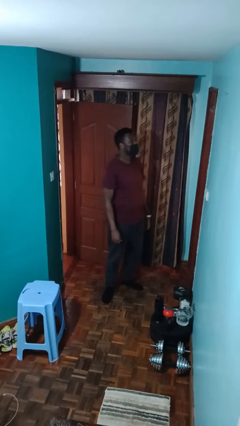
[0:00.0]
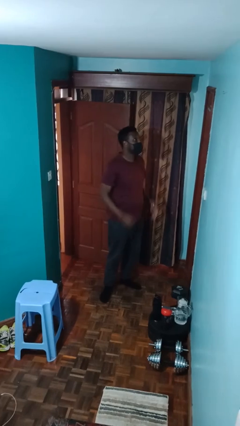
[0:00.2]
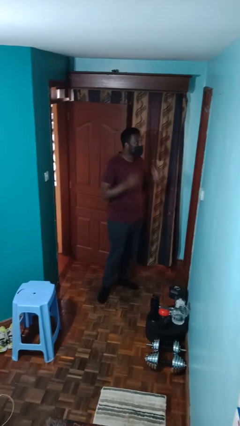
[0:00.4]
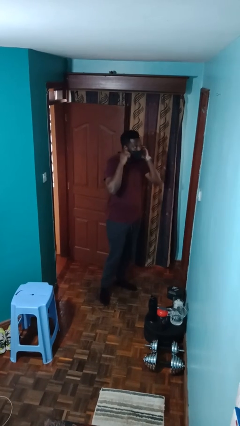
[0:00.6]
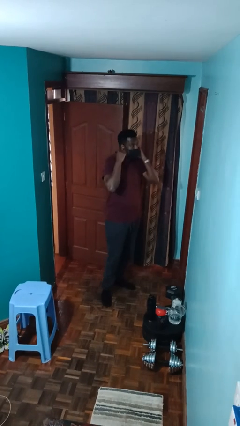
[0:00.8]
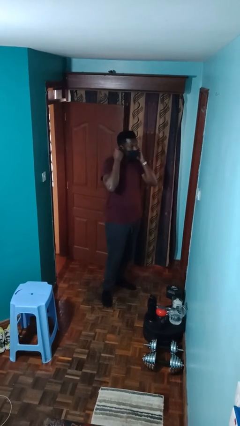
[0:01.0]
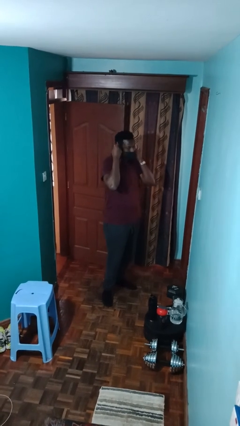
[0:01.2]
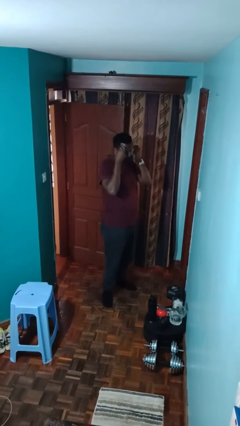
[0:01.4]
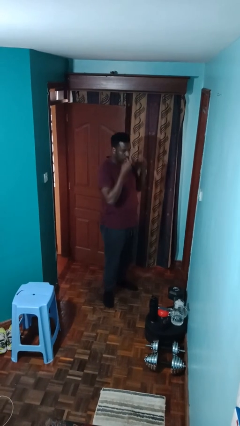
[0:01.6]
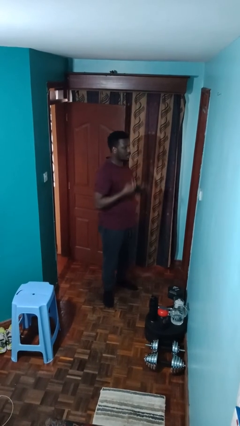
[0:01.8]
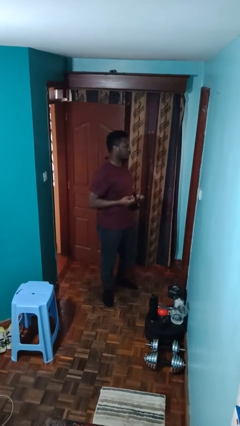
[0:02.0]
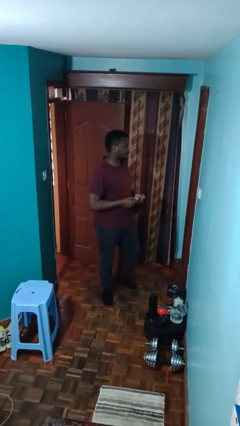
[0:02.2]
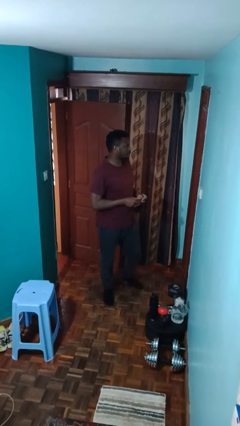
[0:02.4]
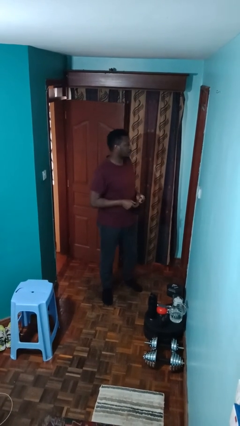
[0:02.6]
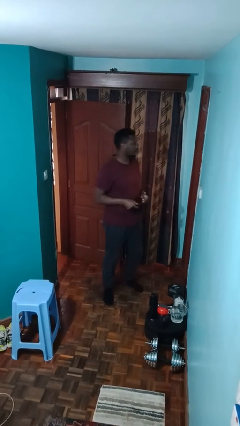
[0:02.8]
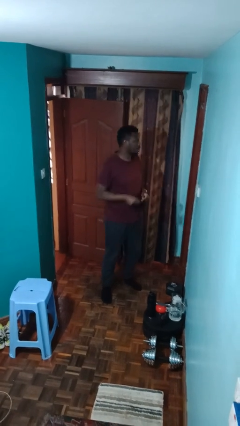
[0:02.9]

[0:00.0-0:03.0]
person takes off facemask

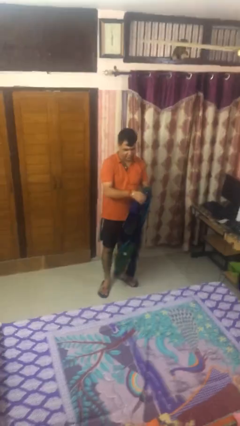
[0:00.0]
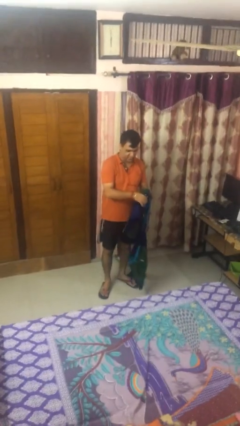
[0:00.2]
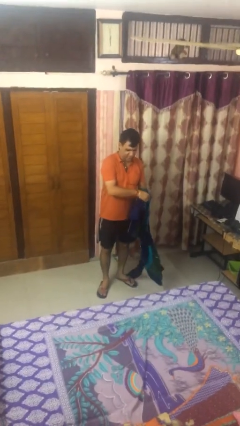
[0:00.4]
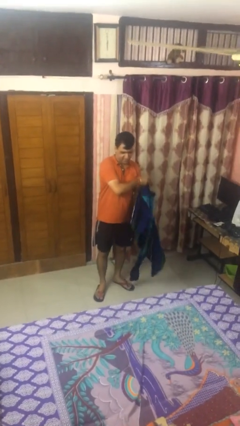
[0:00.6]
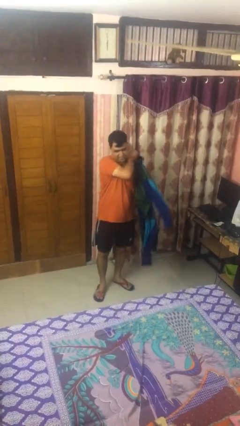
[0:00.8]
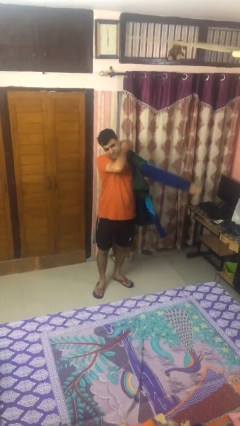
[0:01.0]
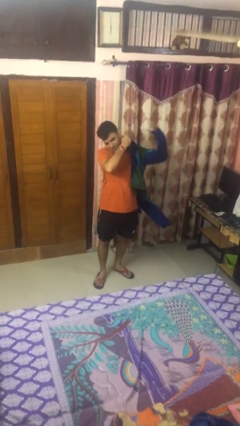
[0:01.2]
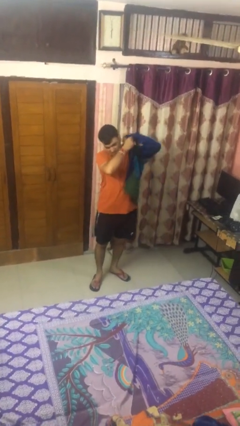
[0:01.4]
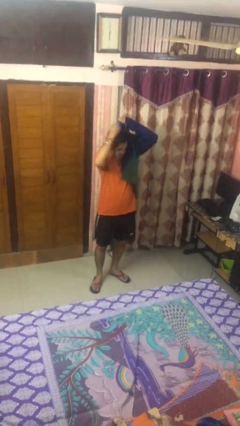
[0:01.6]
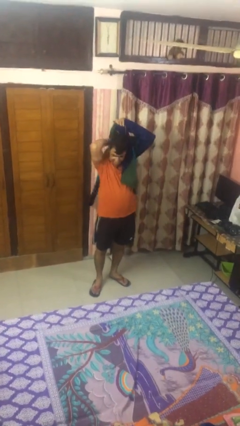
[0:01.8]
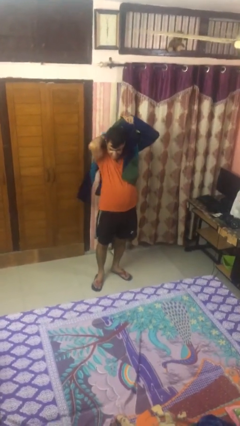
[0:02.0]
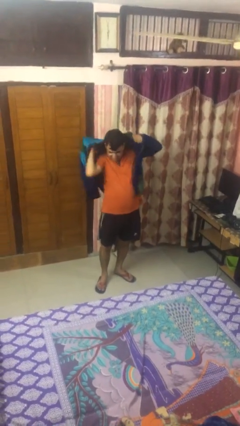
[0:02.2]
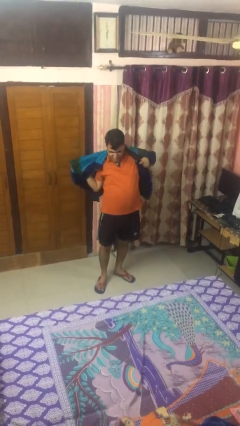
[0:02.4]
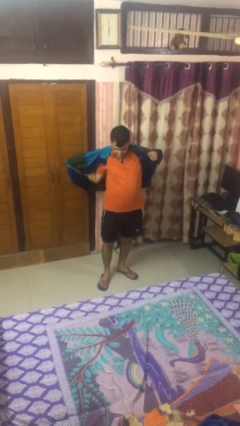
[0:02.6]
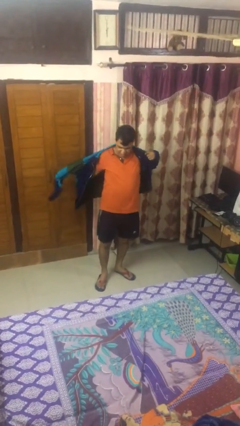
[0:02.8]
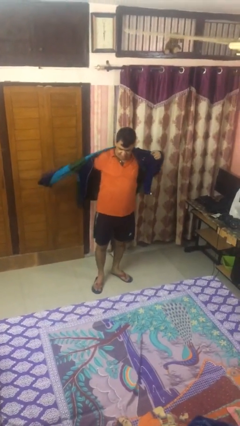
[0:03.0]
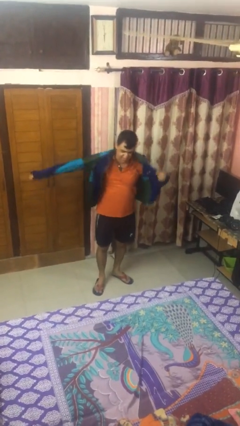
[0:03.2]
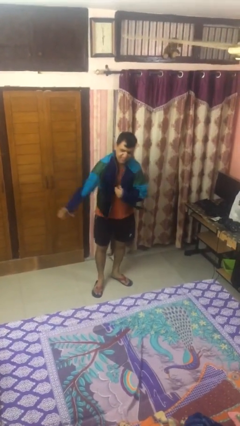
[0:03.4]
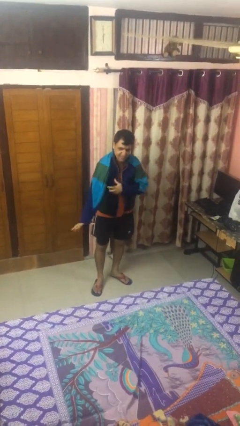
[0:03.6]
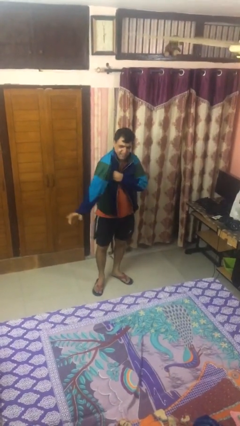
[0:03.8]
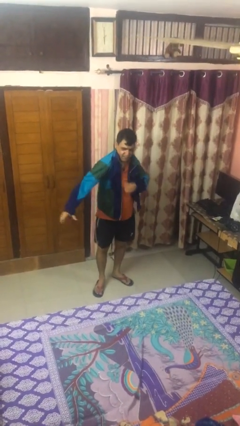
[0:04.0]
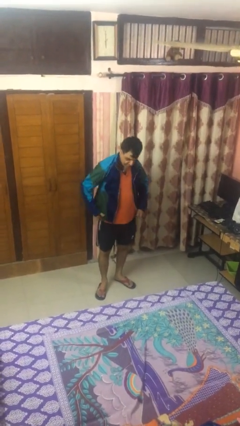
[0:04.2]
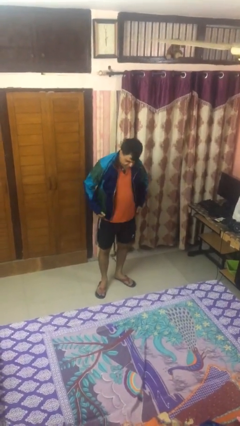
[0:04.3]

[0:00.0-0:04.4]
person puts on jacket

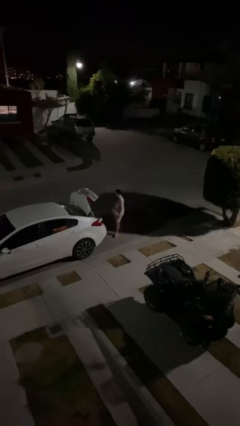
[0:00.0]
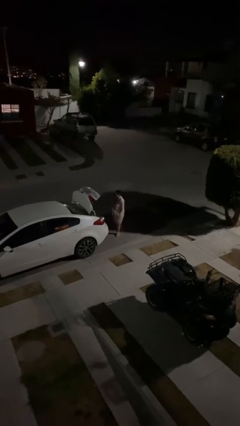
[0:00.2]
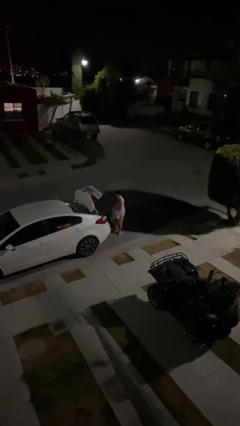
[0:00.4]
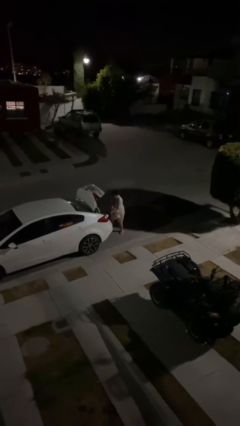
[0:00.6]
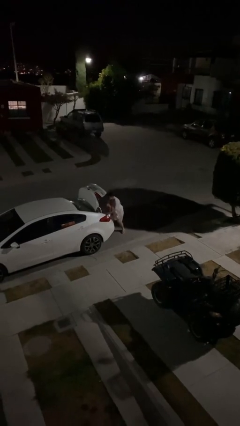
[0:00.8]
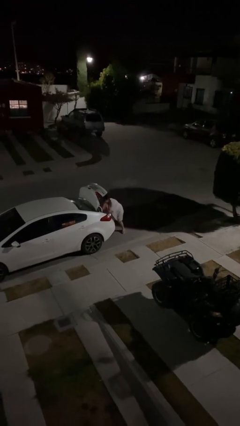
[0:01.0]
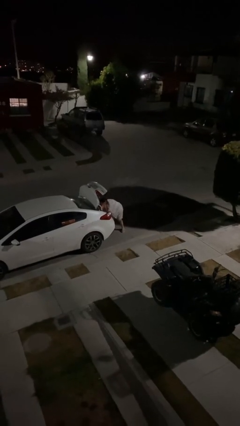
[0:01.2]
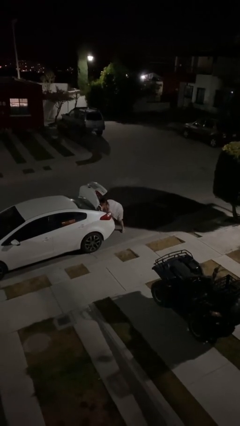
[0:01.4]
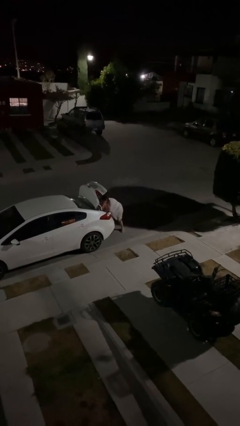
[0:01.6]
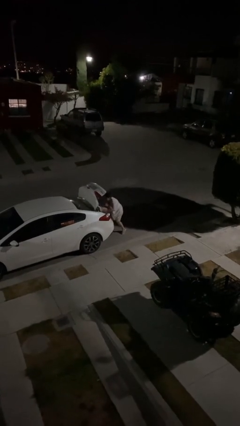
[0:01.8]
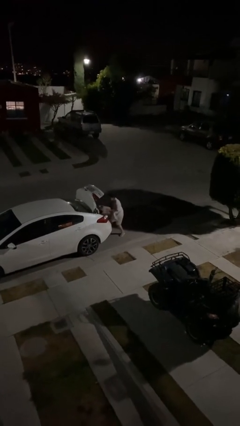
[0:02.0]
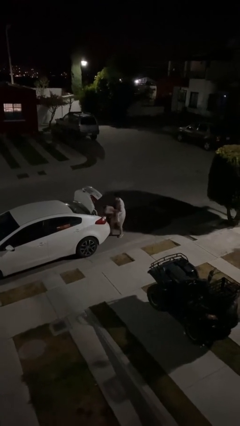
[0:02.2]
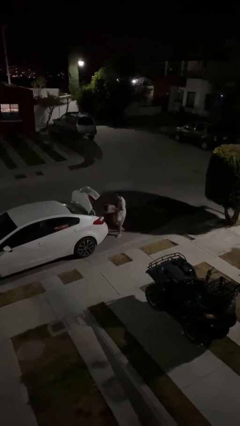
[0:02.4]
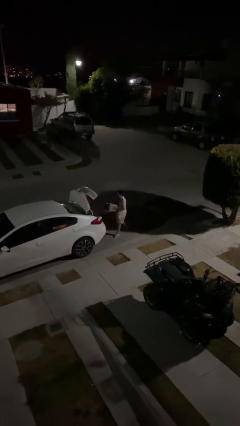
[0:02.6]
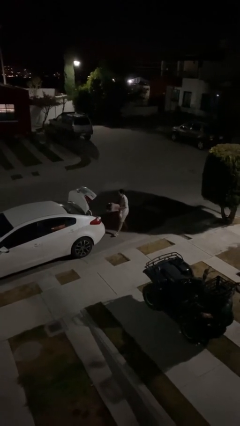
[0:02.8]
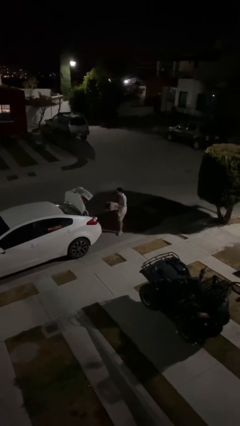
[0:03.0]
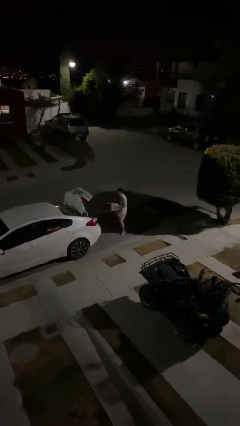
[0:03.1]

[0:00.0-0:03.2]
person unloads car

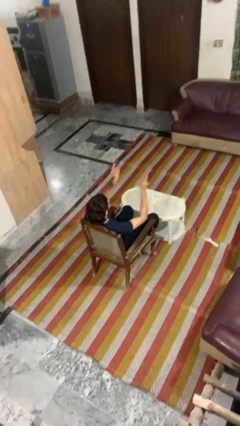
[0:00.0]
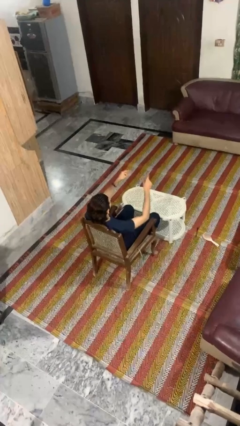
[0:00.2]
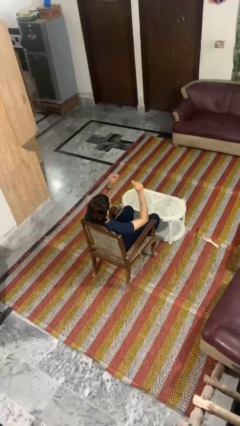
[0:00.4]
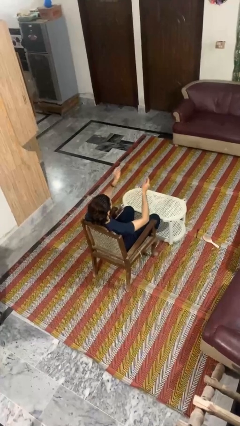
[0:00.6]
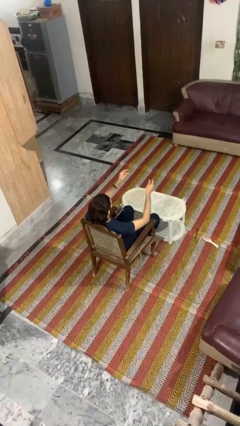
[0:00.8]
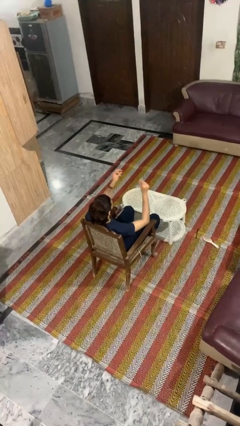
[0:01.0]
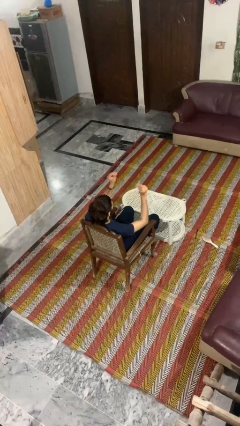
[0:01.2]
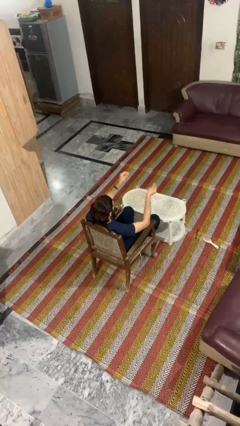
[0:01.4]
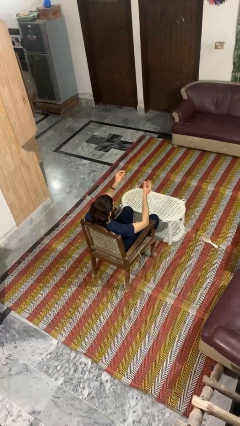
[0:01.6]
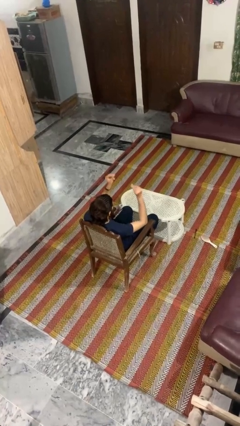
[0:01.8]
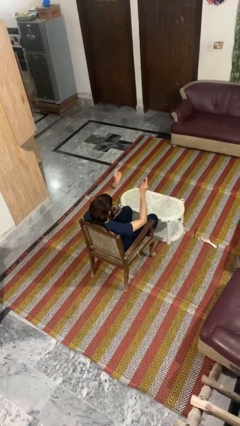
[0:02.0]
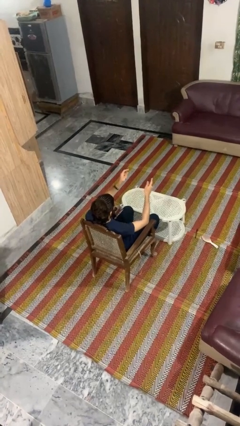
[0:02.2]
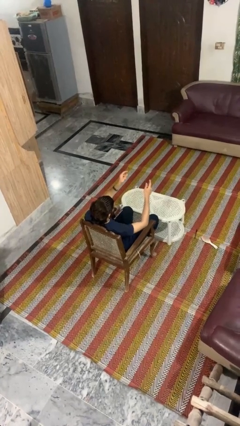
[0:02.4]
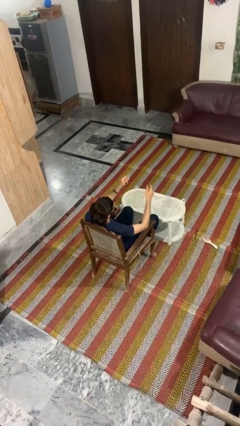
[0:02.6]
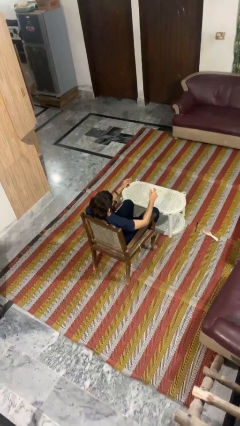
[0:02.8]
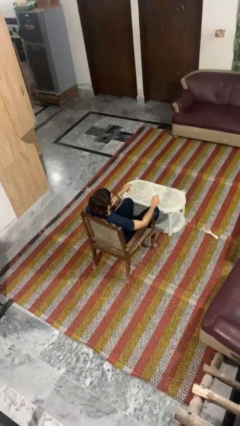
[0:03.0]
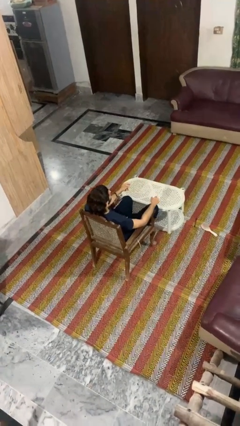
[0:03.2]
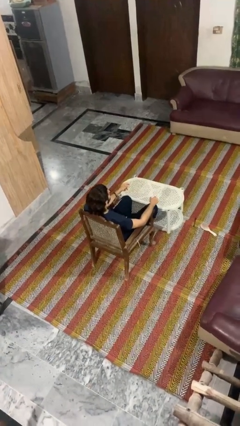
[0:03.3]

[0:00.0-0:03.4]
person snaps fingers

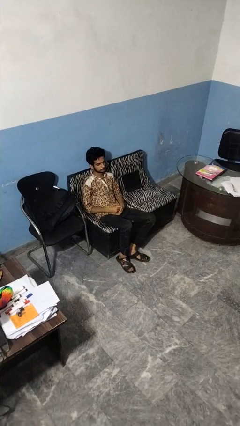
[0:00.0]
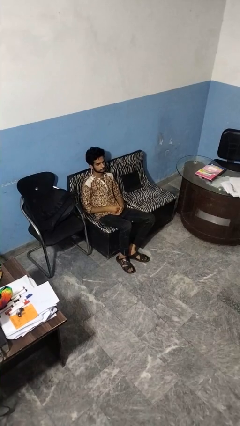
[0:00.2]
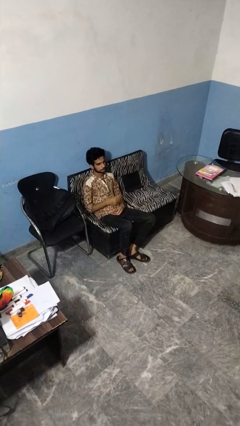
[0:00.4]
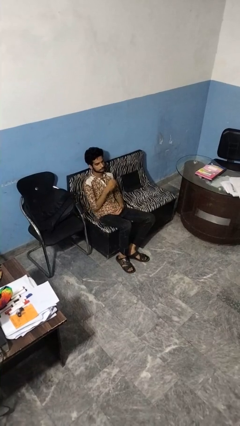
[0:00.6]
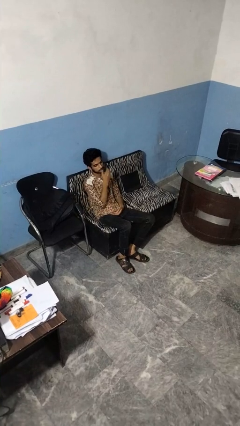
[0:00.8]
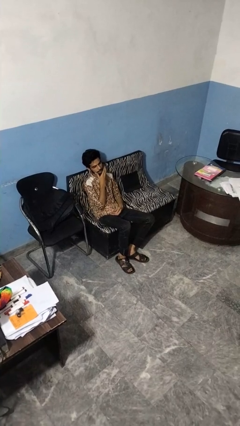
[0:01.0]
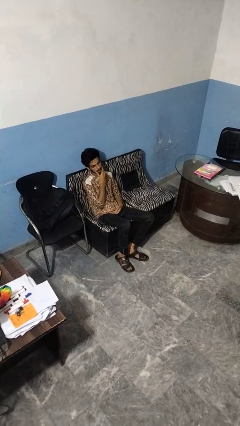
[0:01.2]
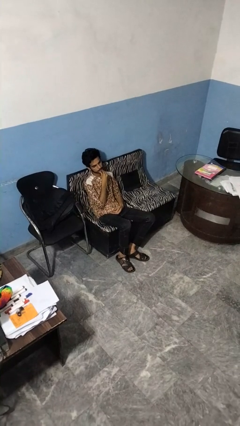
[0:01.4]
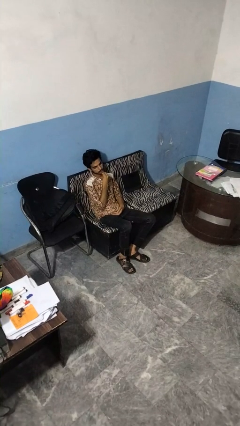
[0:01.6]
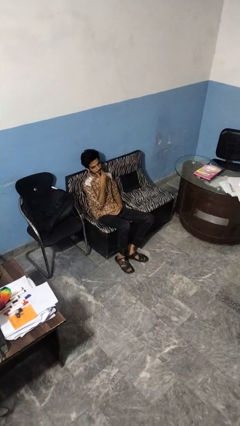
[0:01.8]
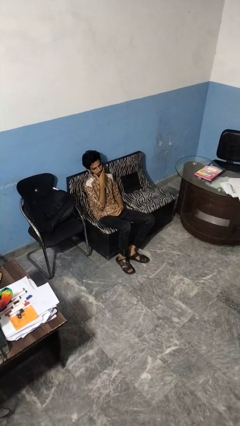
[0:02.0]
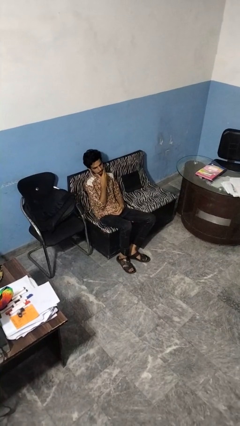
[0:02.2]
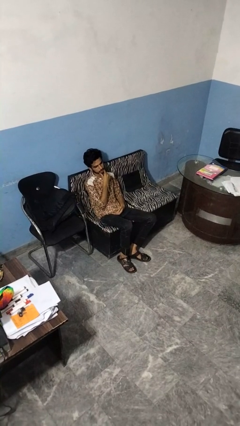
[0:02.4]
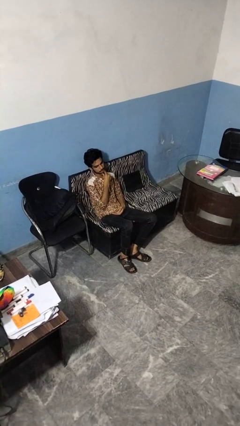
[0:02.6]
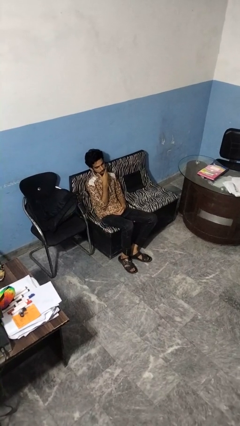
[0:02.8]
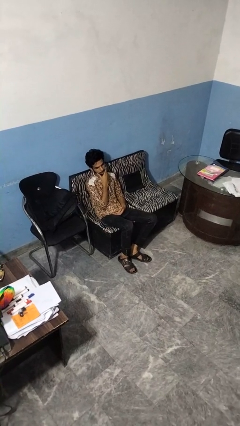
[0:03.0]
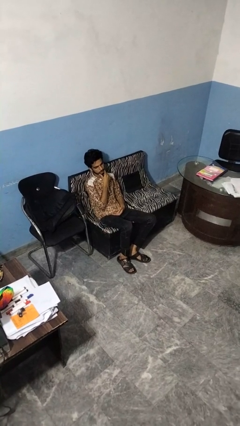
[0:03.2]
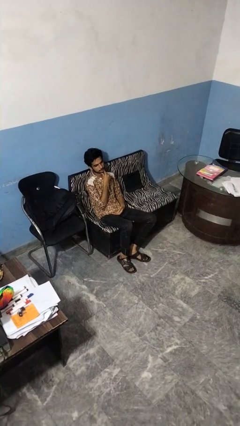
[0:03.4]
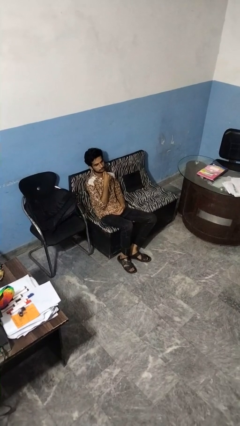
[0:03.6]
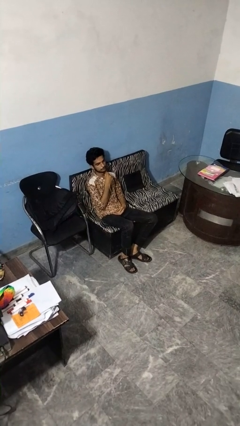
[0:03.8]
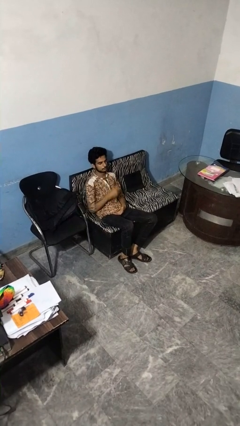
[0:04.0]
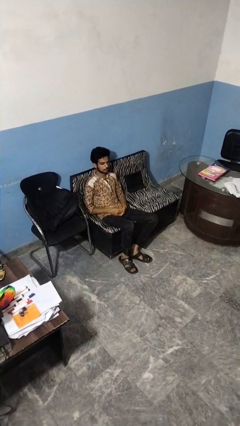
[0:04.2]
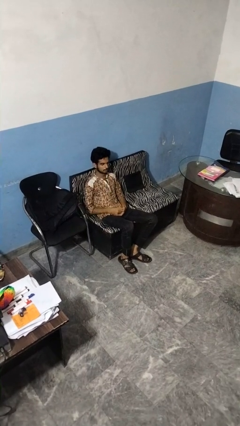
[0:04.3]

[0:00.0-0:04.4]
person strokes chin
